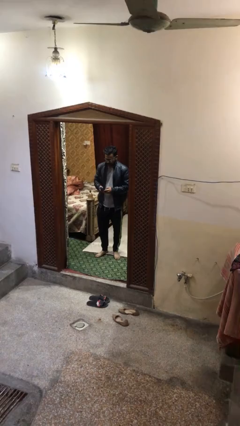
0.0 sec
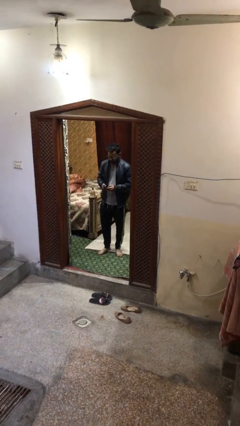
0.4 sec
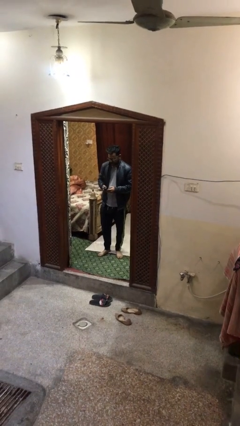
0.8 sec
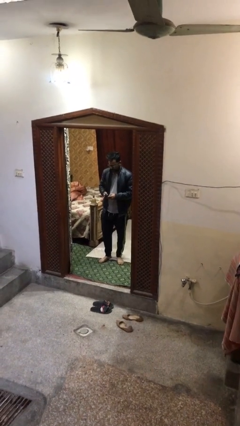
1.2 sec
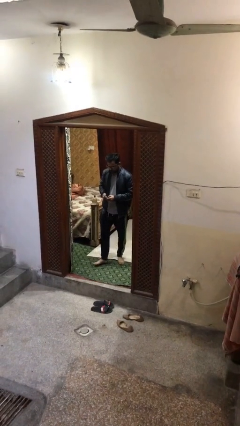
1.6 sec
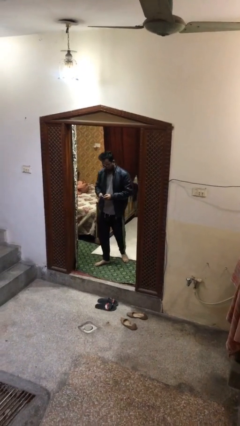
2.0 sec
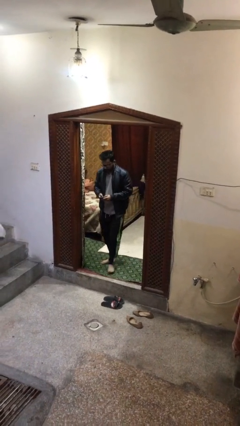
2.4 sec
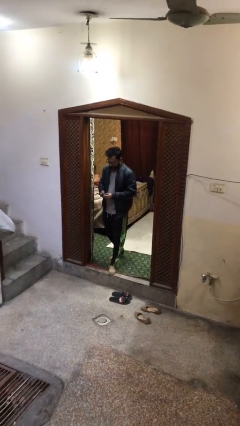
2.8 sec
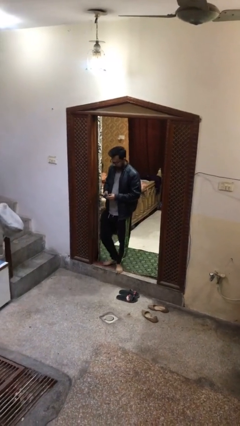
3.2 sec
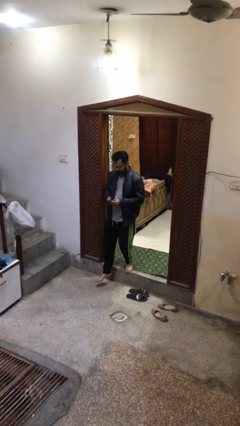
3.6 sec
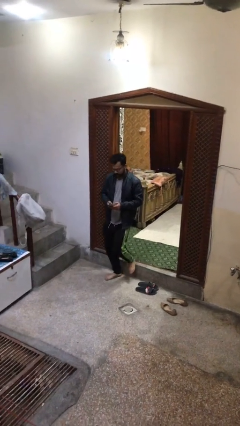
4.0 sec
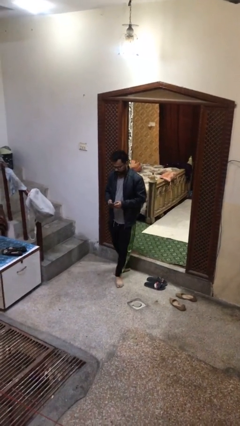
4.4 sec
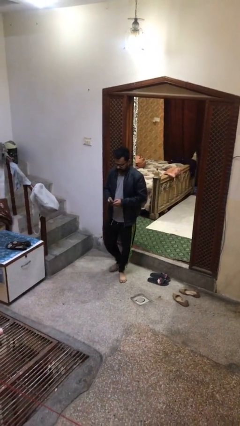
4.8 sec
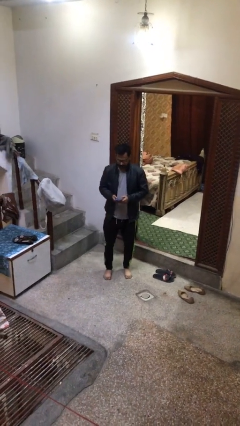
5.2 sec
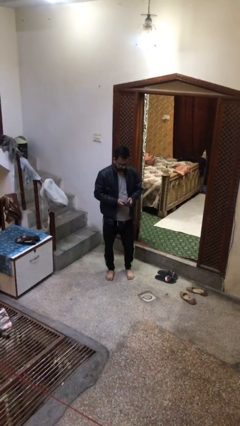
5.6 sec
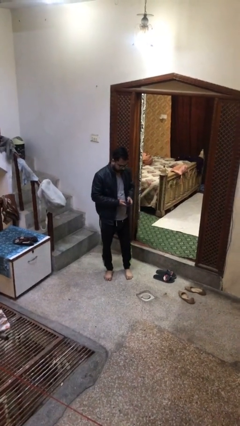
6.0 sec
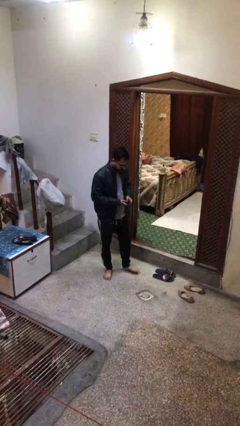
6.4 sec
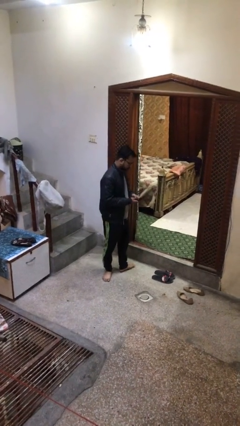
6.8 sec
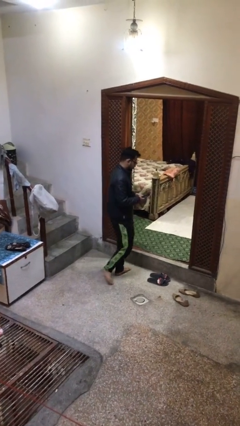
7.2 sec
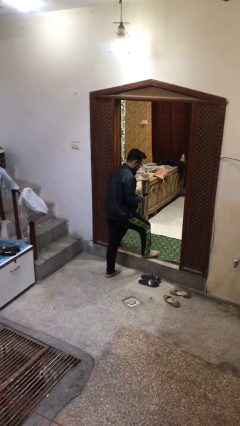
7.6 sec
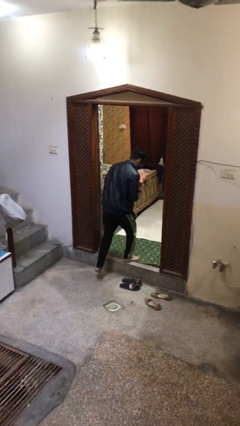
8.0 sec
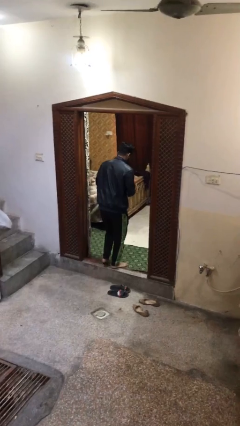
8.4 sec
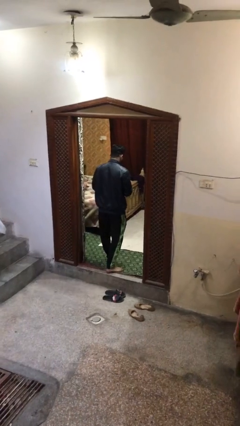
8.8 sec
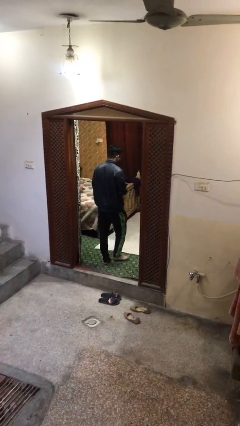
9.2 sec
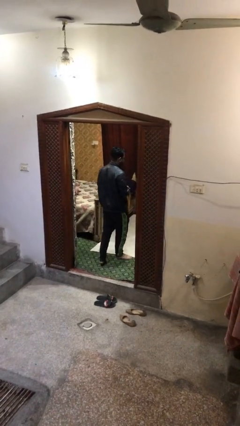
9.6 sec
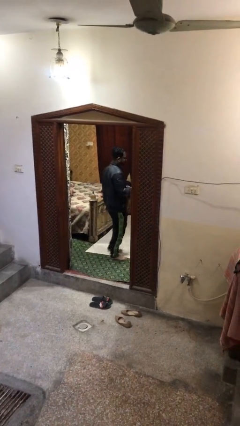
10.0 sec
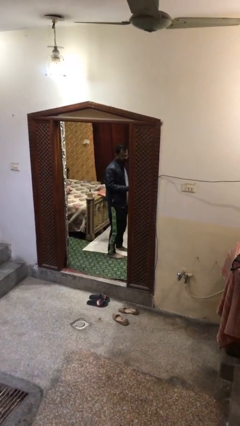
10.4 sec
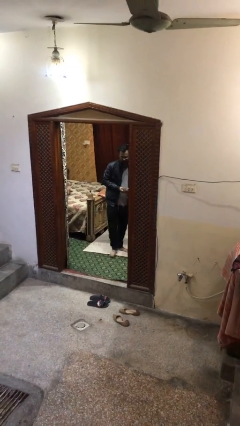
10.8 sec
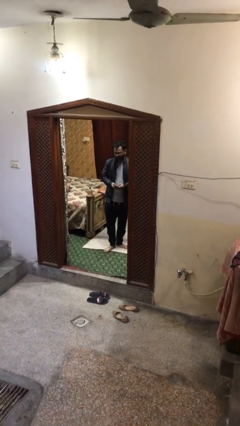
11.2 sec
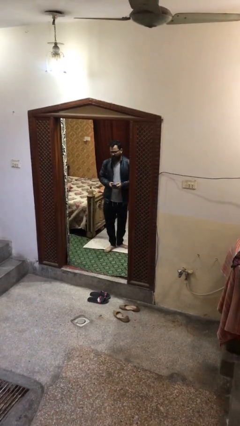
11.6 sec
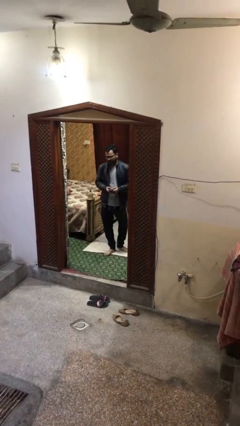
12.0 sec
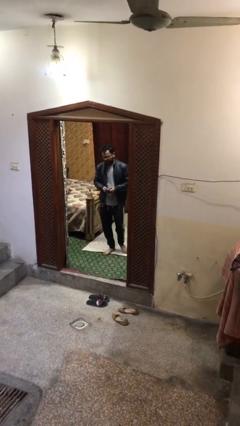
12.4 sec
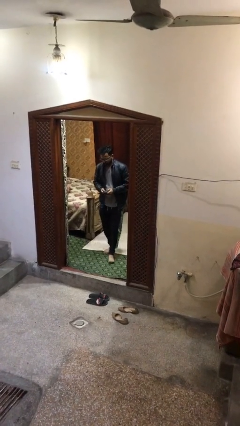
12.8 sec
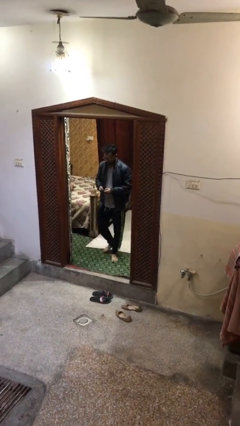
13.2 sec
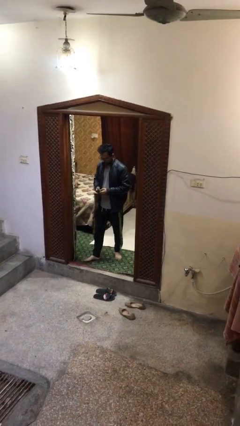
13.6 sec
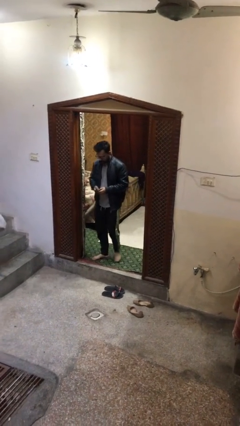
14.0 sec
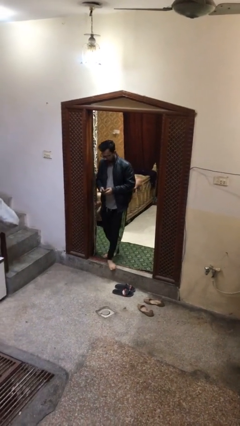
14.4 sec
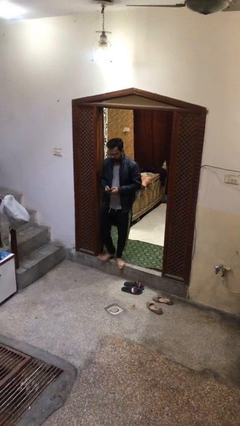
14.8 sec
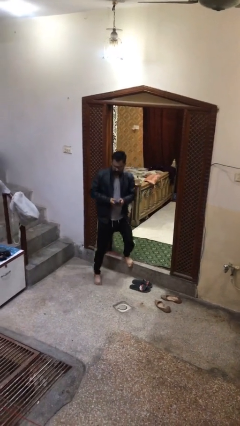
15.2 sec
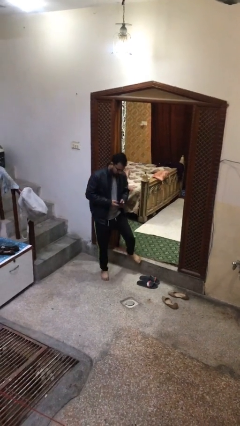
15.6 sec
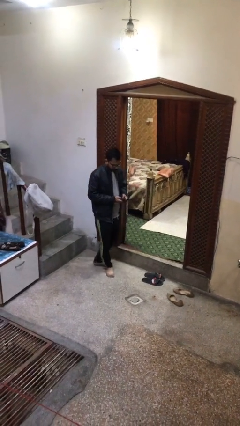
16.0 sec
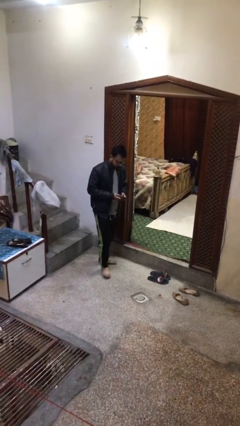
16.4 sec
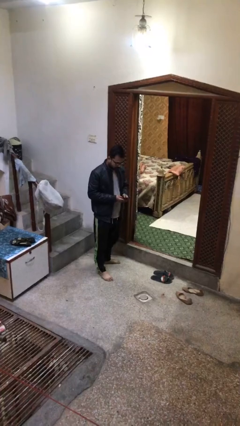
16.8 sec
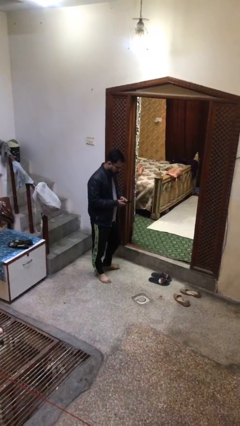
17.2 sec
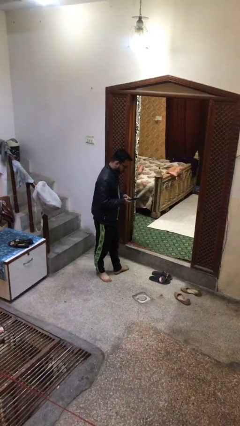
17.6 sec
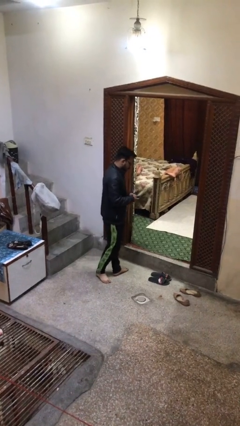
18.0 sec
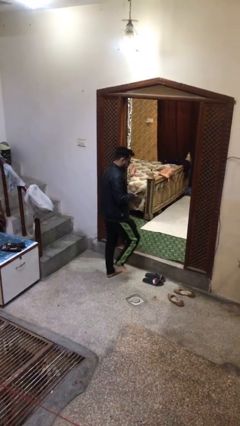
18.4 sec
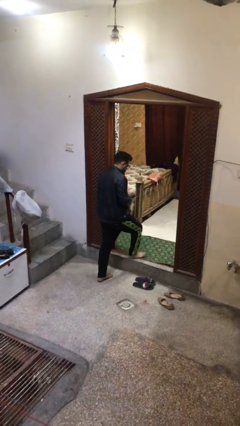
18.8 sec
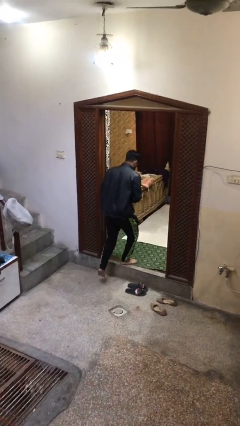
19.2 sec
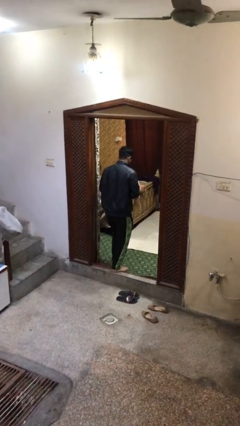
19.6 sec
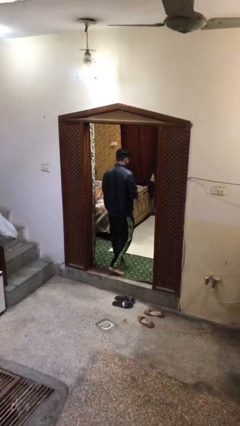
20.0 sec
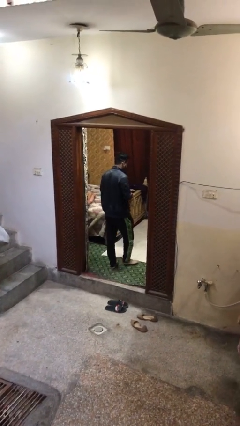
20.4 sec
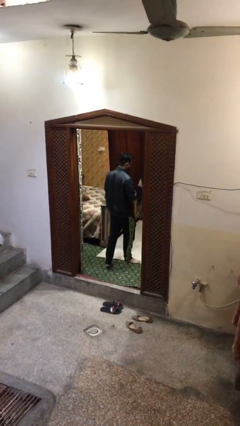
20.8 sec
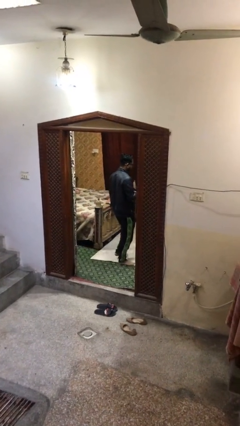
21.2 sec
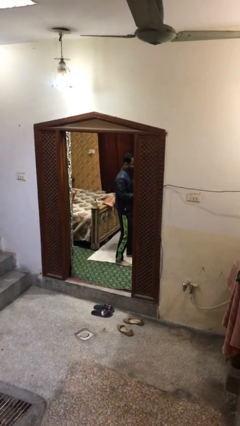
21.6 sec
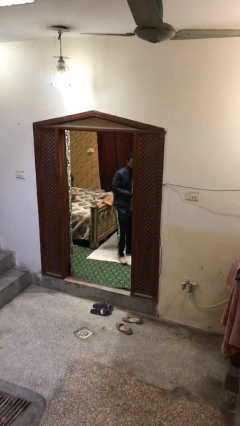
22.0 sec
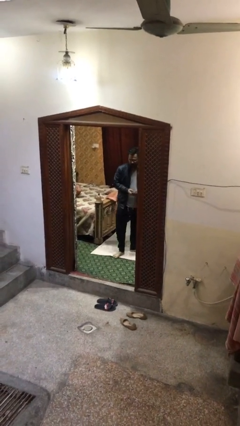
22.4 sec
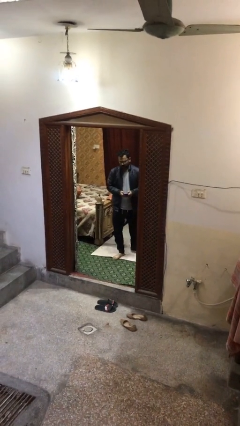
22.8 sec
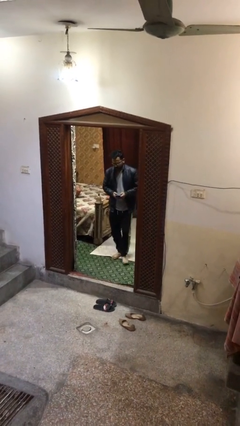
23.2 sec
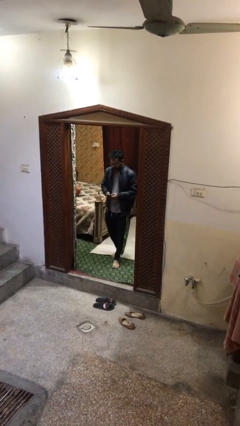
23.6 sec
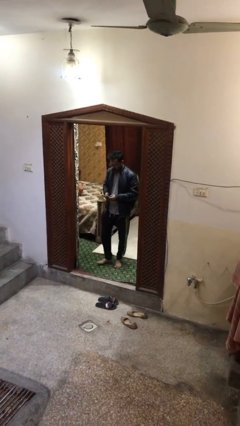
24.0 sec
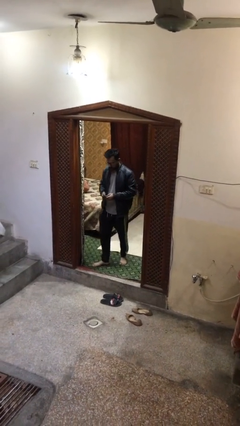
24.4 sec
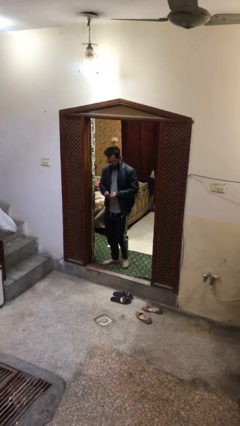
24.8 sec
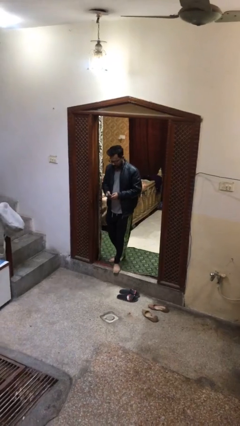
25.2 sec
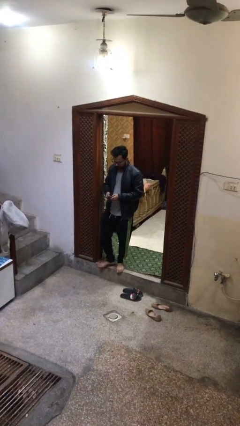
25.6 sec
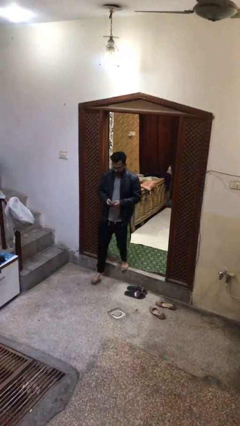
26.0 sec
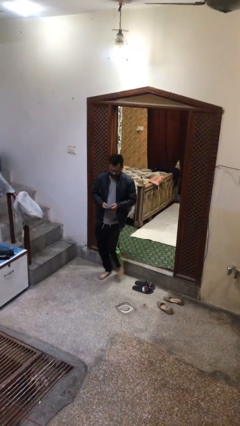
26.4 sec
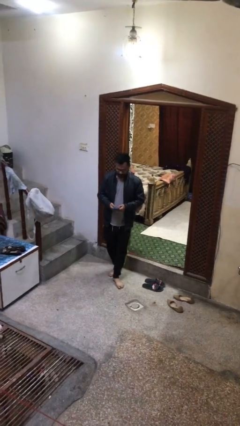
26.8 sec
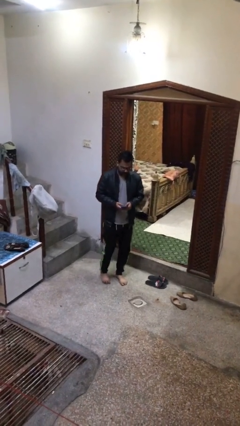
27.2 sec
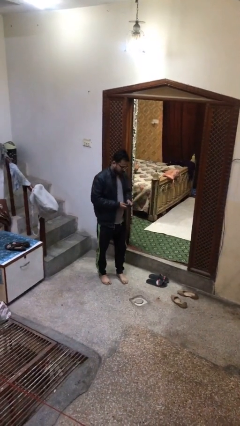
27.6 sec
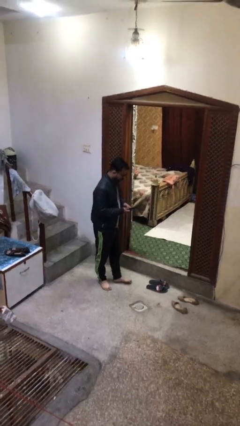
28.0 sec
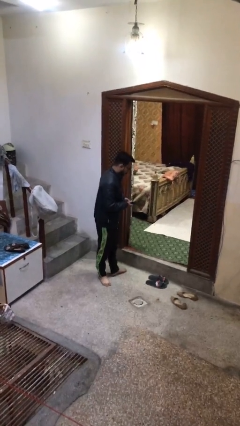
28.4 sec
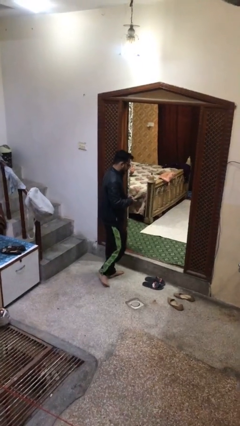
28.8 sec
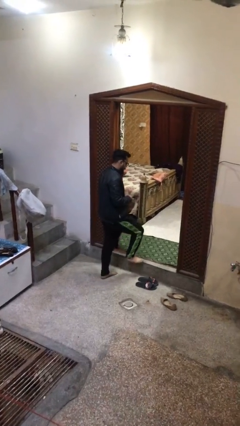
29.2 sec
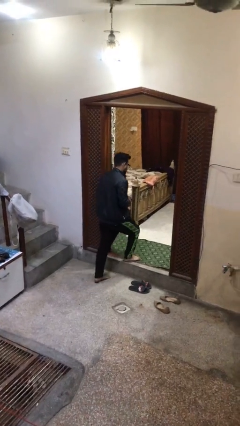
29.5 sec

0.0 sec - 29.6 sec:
person texts on phone

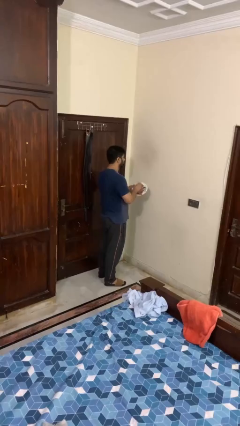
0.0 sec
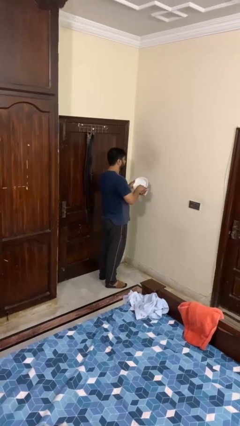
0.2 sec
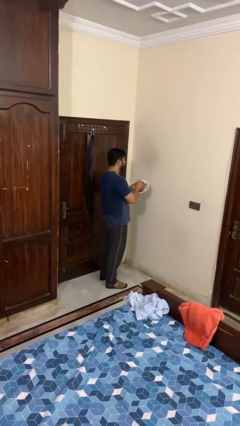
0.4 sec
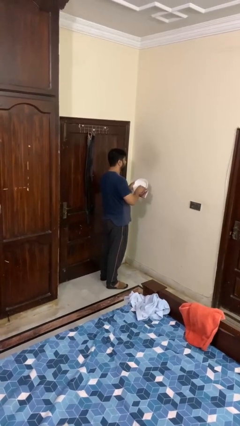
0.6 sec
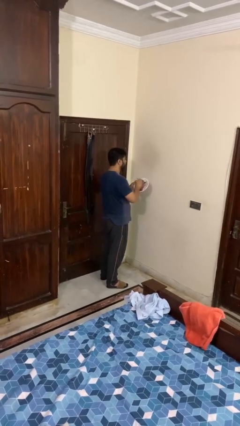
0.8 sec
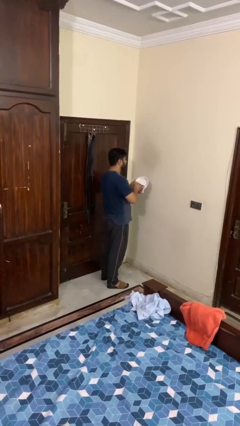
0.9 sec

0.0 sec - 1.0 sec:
person dries dish

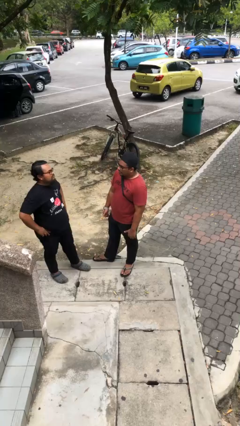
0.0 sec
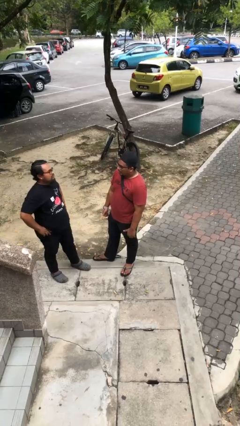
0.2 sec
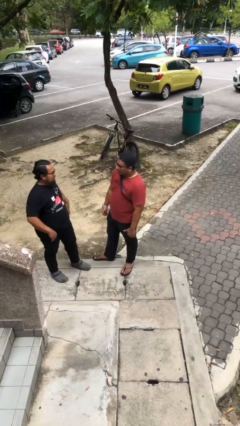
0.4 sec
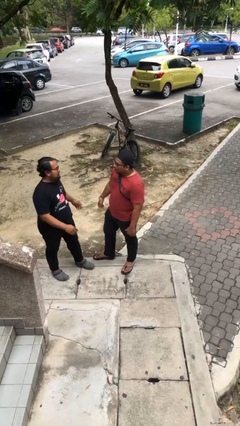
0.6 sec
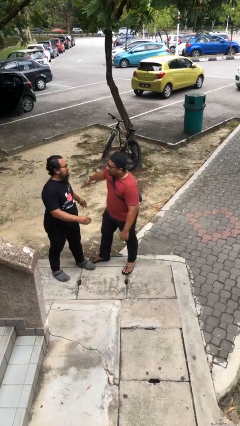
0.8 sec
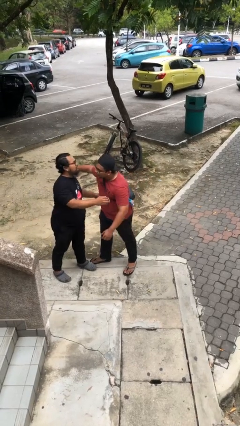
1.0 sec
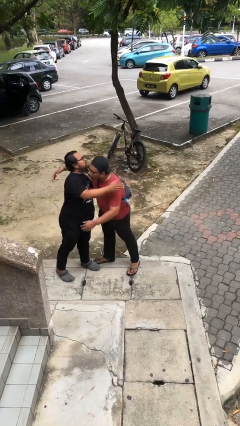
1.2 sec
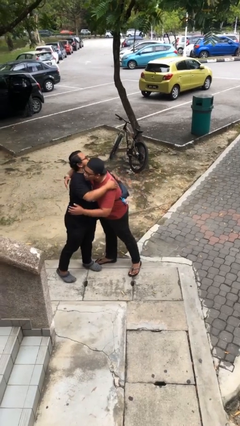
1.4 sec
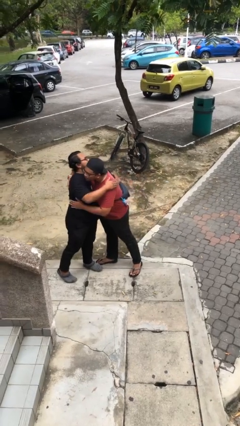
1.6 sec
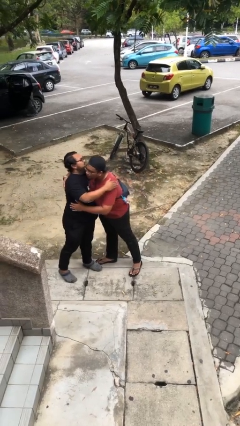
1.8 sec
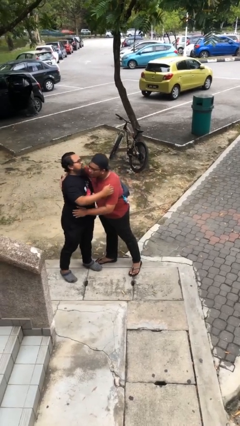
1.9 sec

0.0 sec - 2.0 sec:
person embraces person
